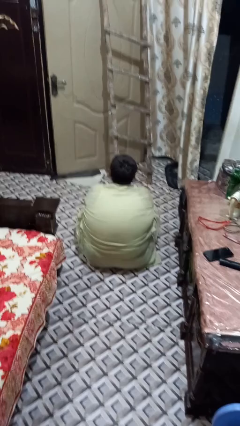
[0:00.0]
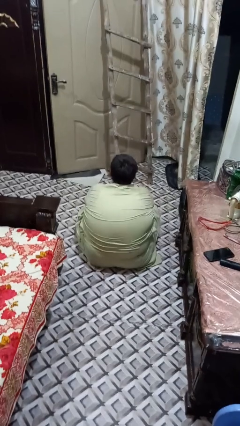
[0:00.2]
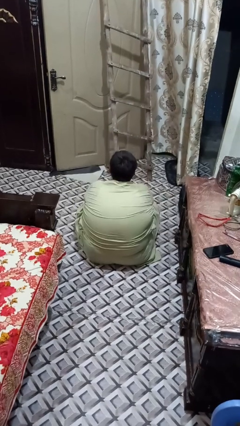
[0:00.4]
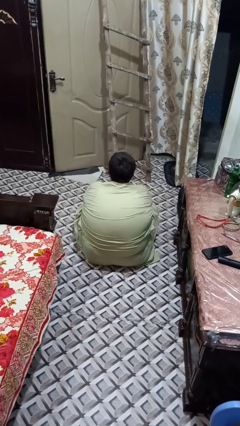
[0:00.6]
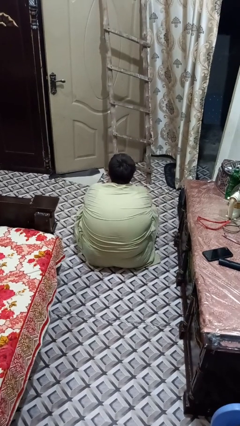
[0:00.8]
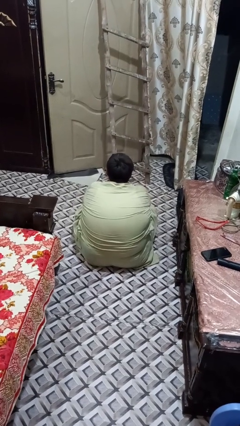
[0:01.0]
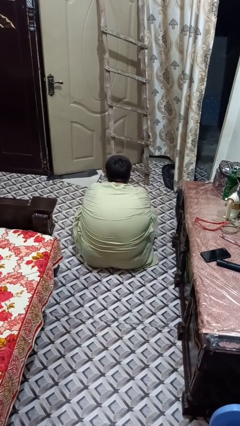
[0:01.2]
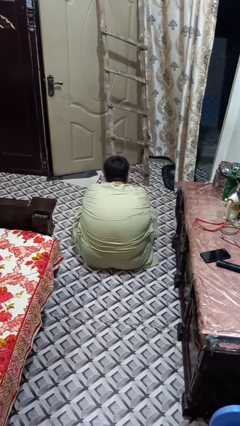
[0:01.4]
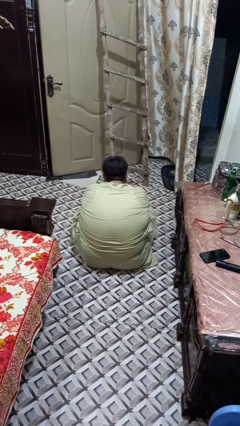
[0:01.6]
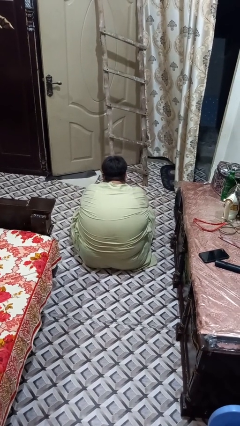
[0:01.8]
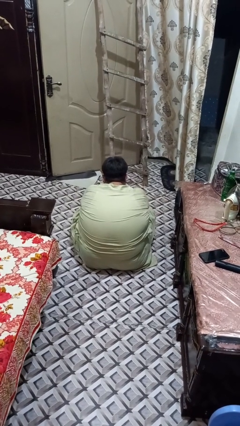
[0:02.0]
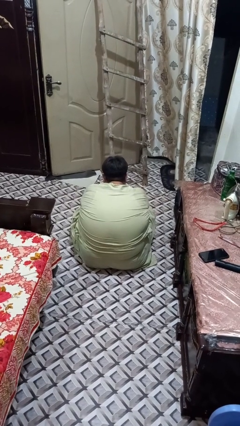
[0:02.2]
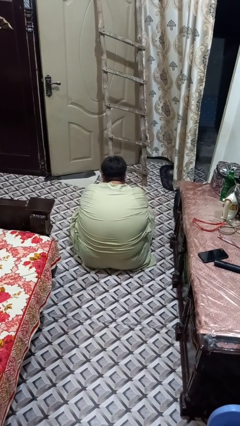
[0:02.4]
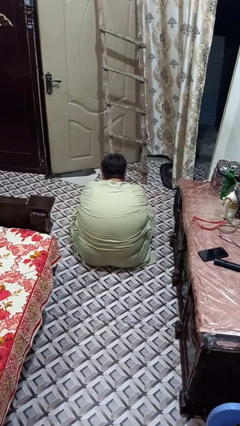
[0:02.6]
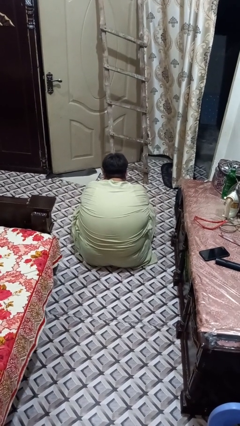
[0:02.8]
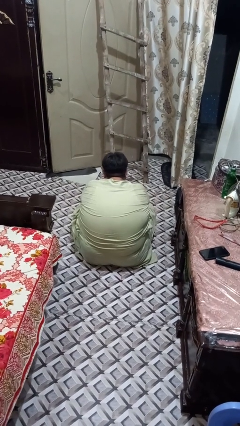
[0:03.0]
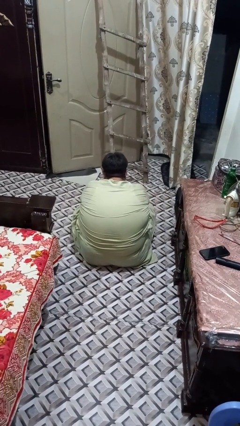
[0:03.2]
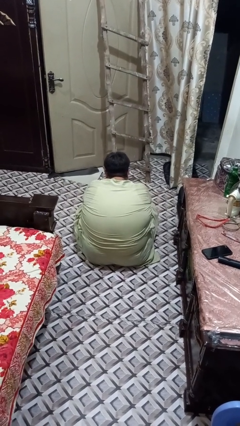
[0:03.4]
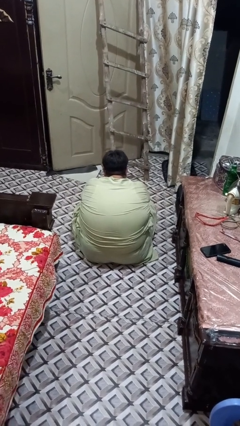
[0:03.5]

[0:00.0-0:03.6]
person covers face with hands

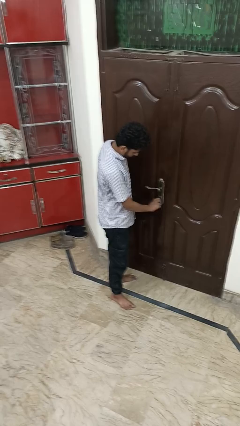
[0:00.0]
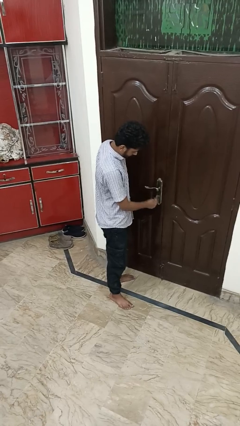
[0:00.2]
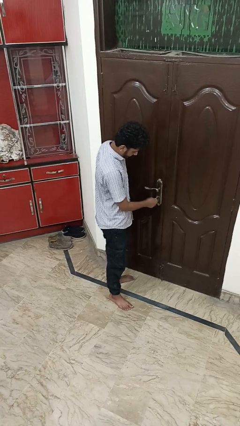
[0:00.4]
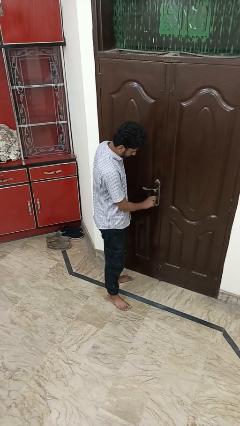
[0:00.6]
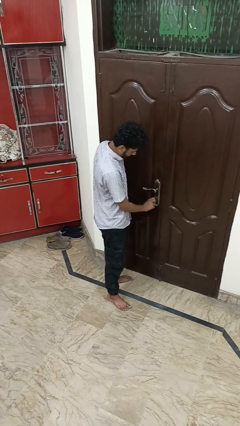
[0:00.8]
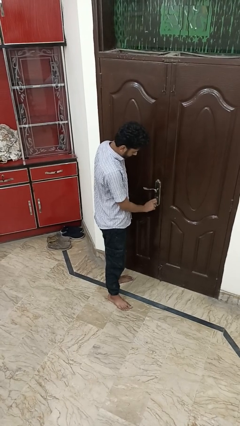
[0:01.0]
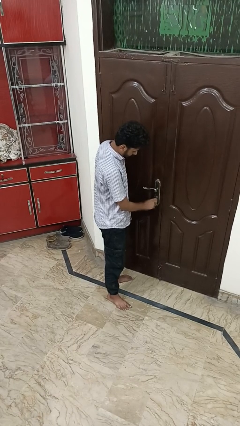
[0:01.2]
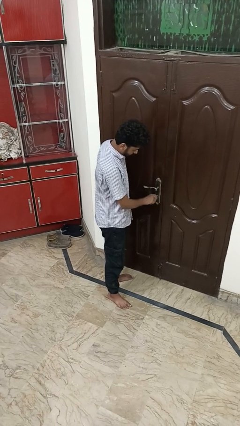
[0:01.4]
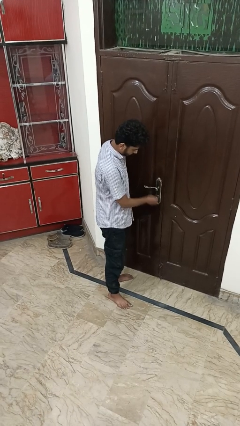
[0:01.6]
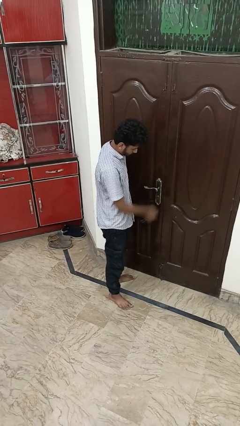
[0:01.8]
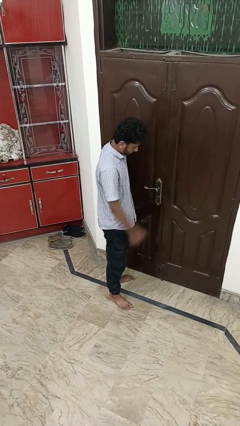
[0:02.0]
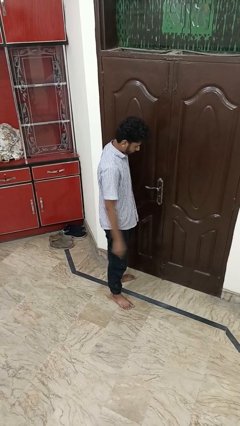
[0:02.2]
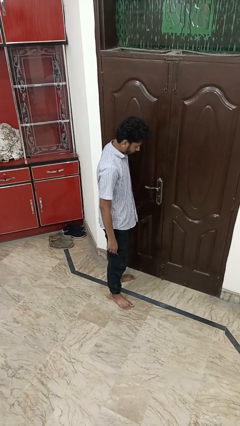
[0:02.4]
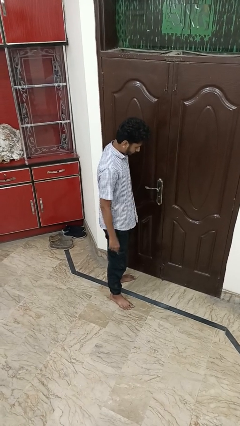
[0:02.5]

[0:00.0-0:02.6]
person locks door with keys

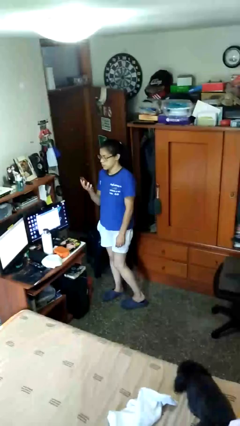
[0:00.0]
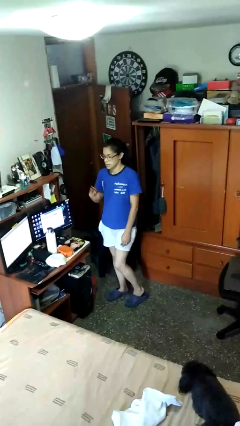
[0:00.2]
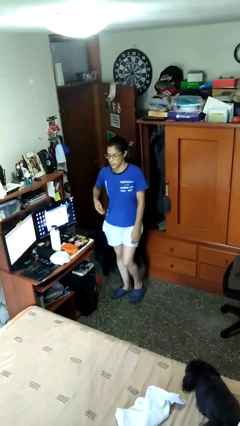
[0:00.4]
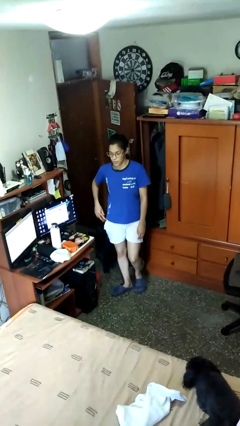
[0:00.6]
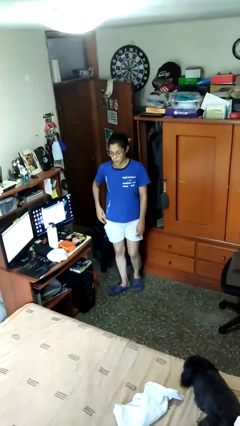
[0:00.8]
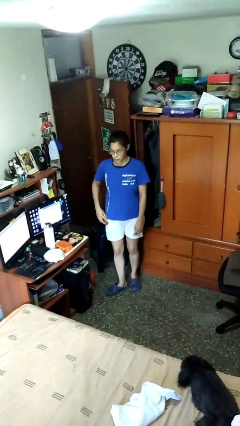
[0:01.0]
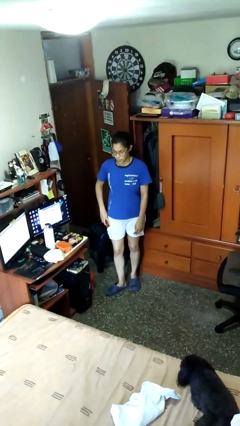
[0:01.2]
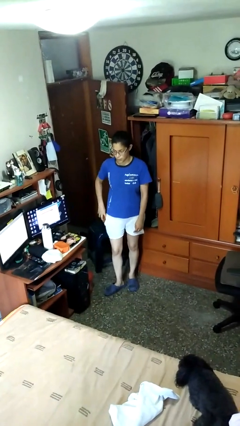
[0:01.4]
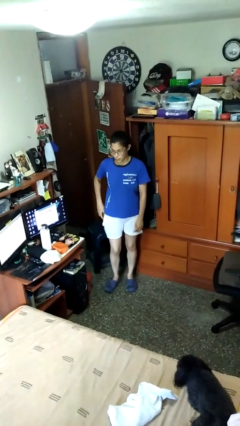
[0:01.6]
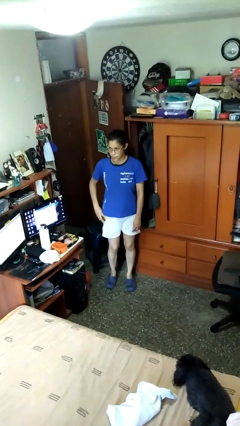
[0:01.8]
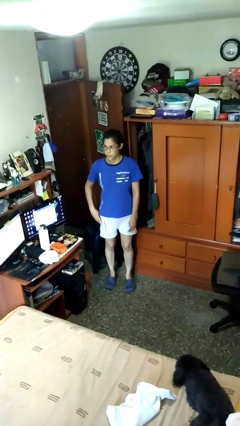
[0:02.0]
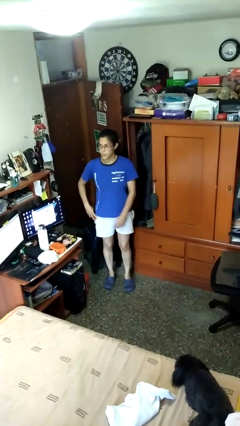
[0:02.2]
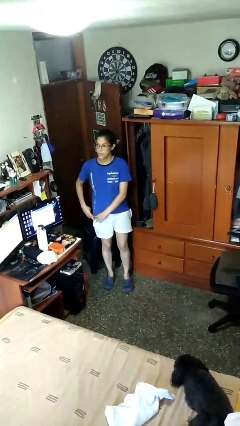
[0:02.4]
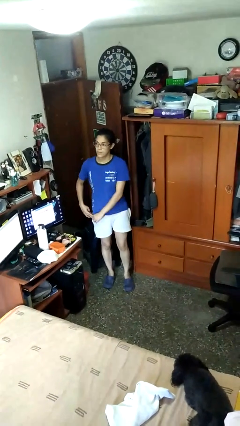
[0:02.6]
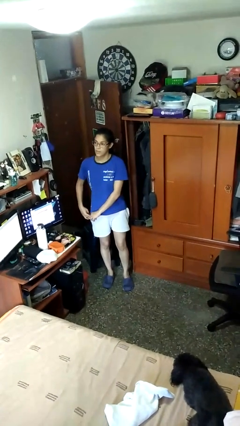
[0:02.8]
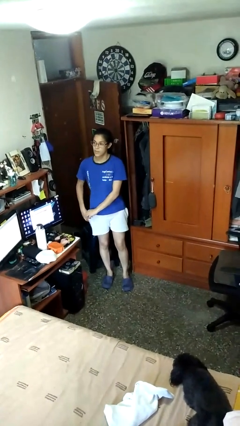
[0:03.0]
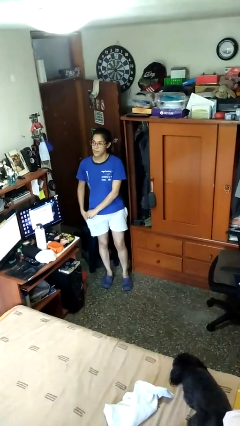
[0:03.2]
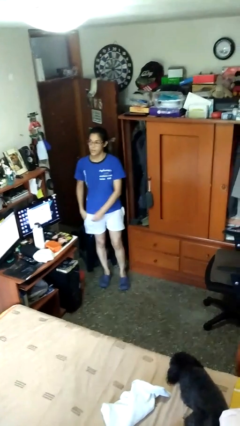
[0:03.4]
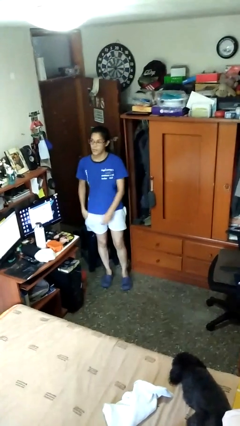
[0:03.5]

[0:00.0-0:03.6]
person puts phone into pocket

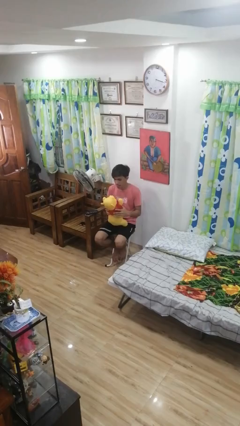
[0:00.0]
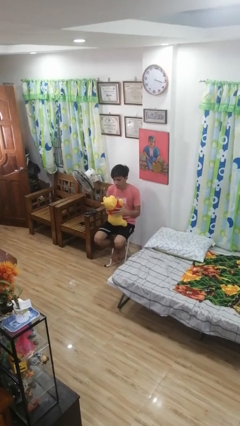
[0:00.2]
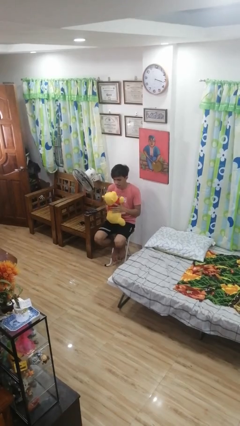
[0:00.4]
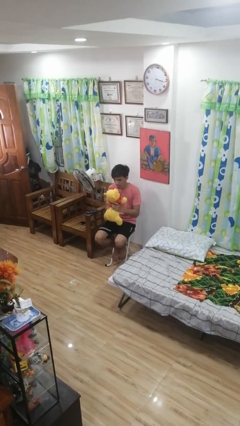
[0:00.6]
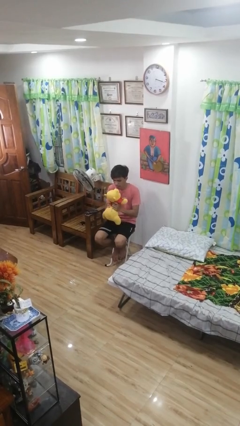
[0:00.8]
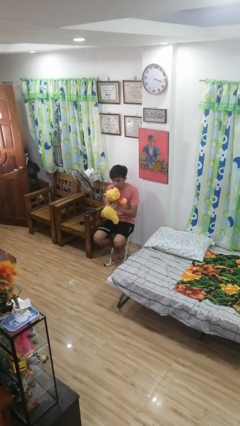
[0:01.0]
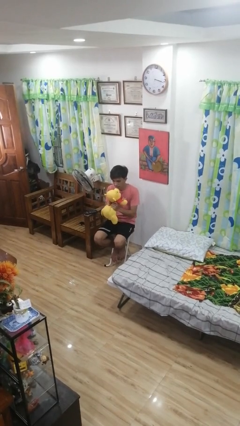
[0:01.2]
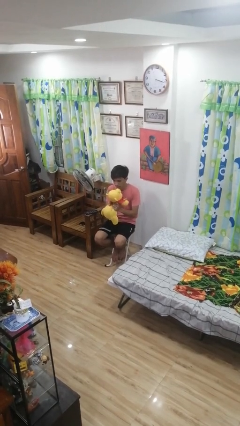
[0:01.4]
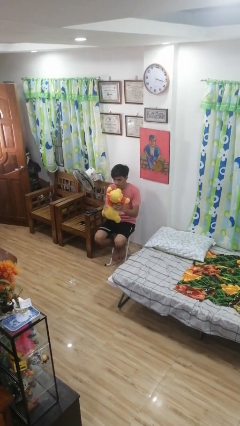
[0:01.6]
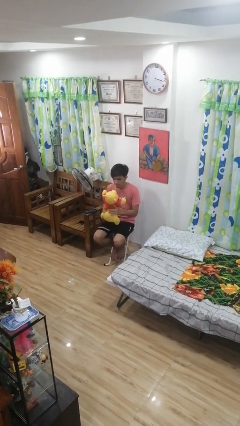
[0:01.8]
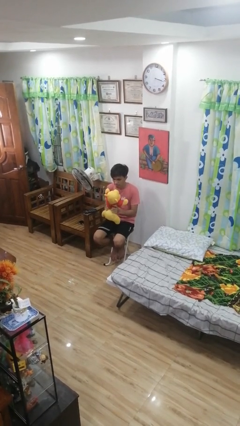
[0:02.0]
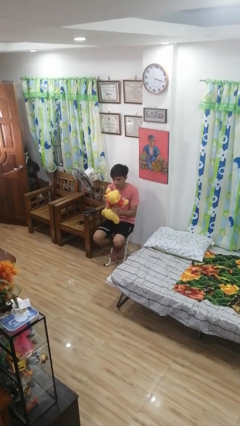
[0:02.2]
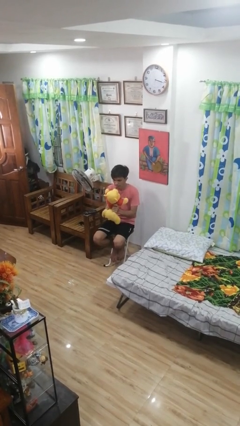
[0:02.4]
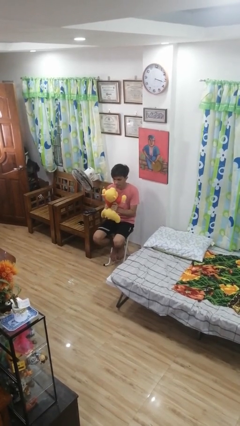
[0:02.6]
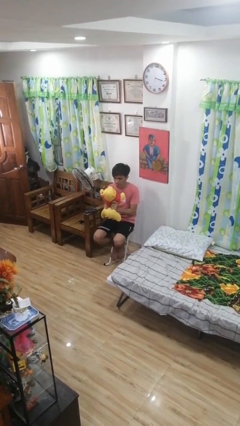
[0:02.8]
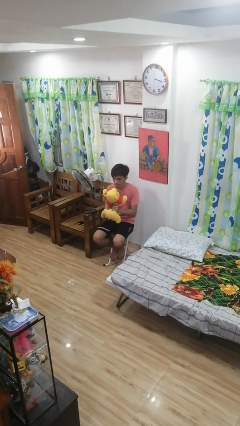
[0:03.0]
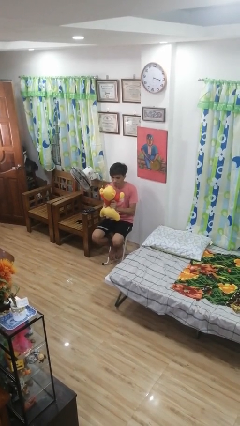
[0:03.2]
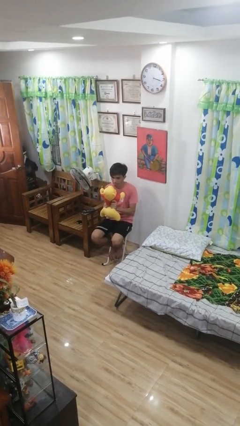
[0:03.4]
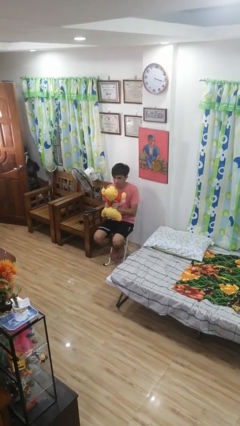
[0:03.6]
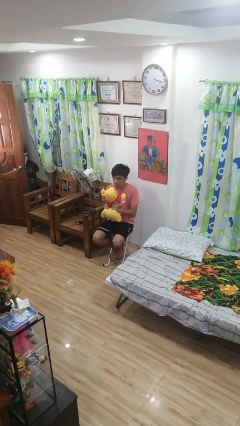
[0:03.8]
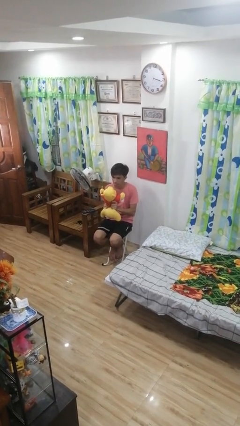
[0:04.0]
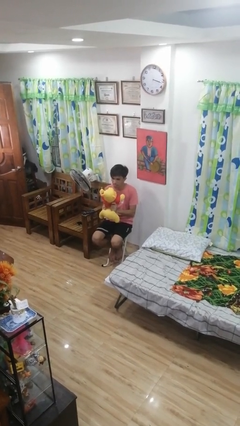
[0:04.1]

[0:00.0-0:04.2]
person squeezes object

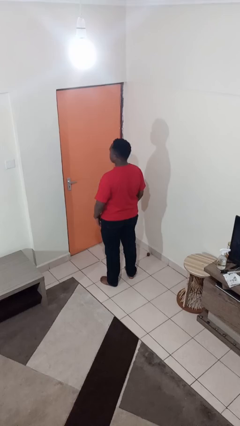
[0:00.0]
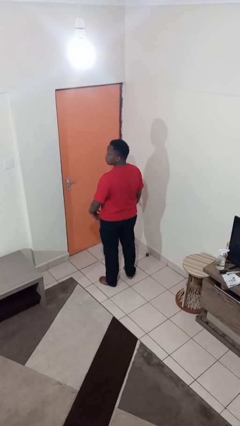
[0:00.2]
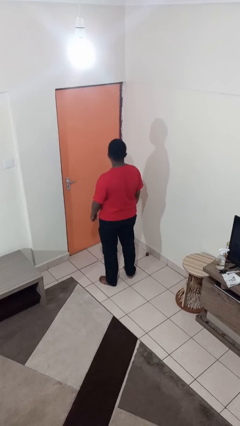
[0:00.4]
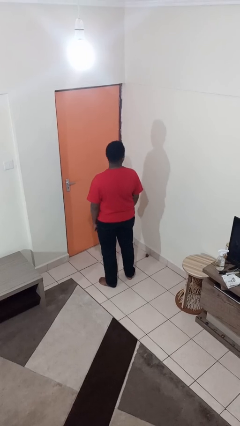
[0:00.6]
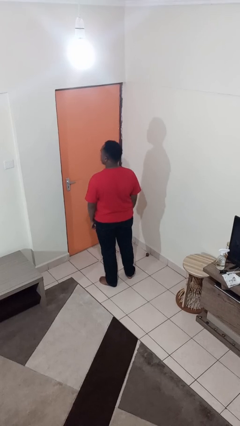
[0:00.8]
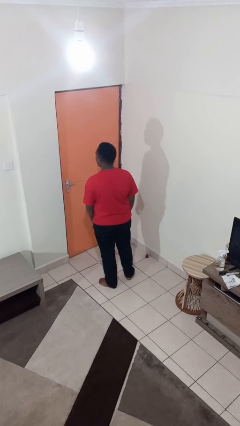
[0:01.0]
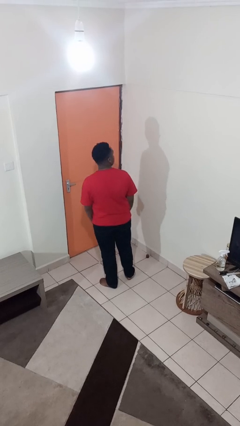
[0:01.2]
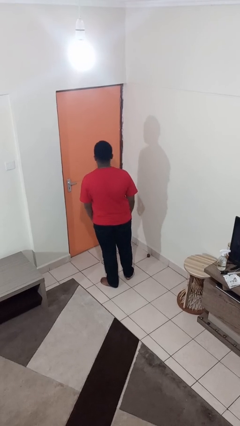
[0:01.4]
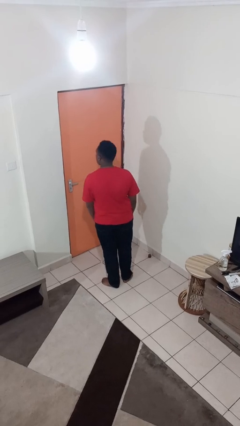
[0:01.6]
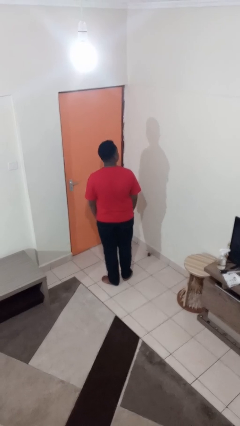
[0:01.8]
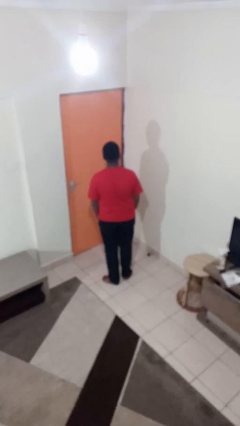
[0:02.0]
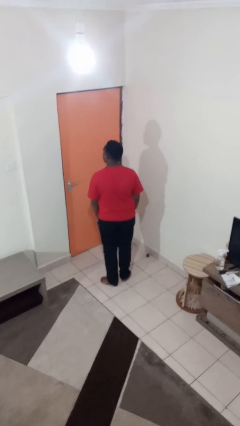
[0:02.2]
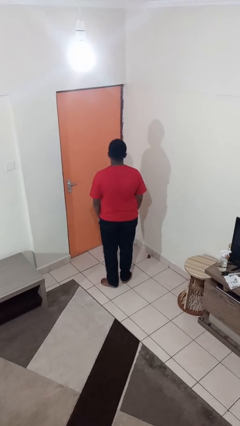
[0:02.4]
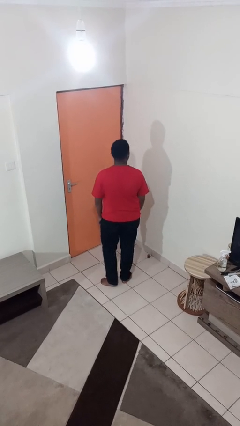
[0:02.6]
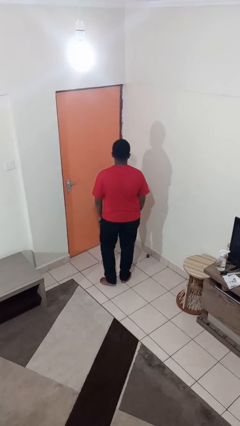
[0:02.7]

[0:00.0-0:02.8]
person shakes head

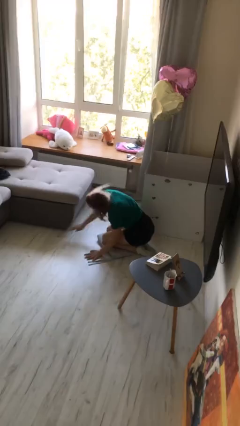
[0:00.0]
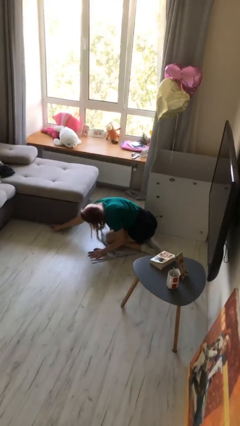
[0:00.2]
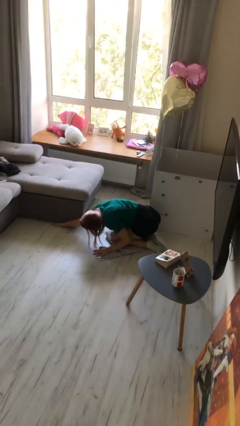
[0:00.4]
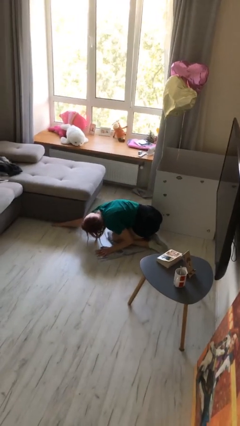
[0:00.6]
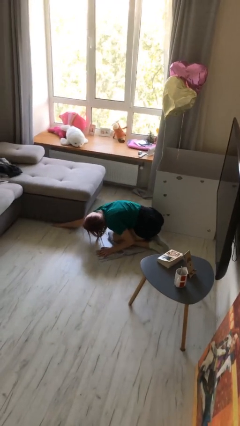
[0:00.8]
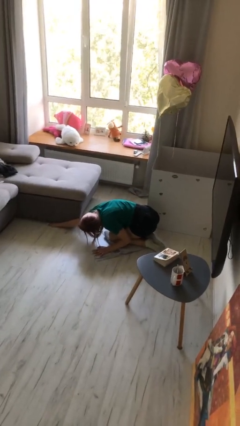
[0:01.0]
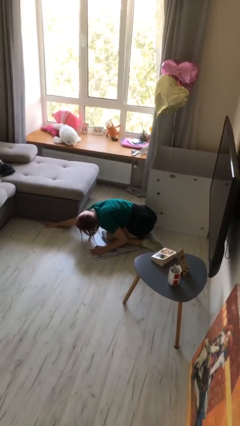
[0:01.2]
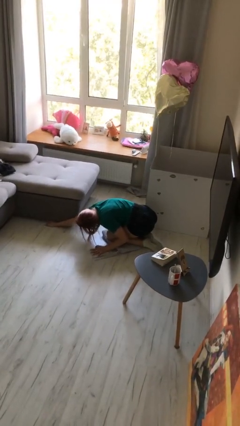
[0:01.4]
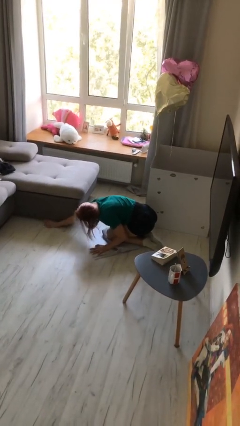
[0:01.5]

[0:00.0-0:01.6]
person searches under bed
